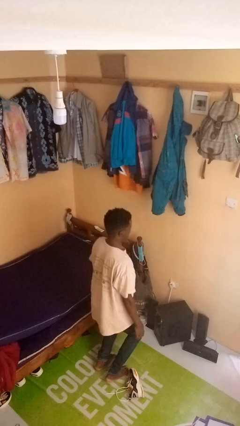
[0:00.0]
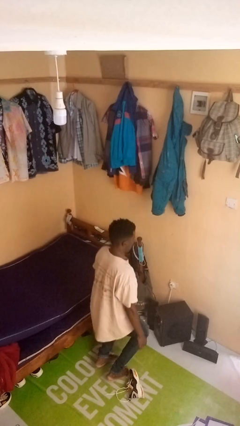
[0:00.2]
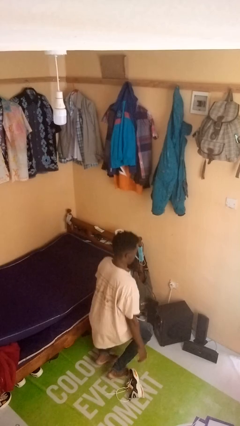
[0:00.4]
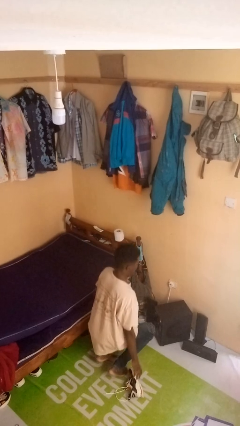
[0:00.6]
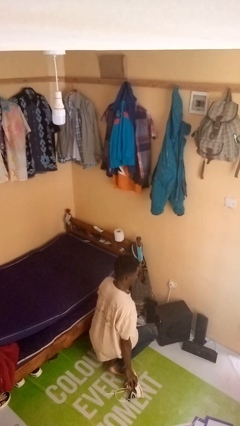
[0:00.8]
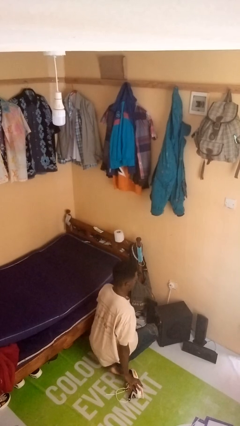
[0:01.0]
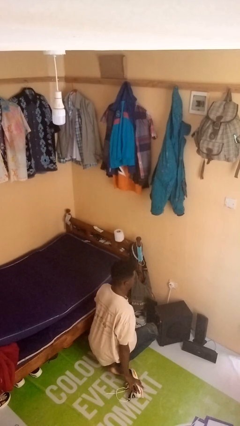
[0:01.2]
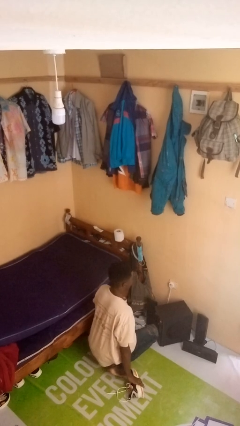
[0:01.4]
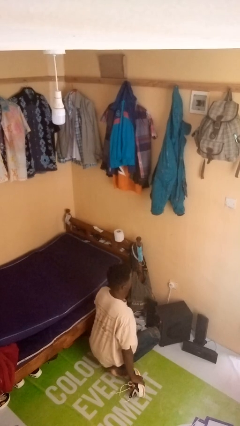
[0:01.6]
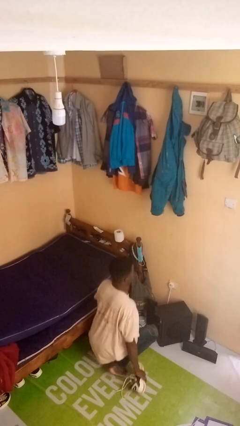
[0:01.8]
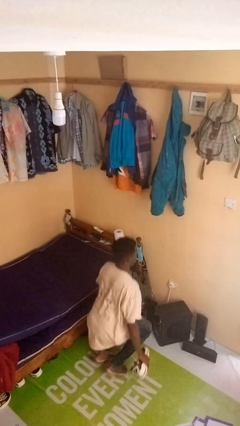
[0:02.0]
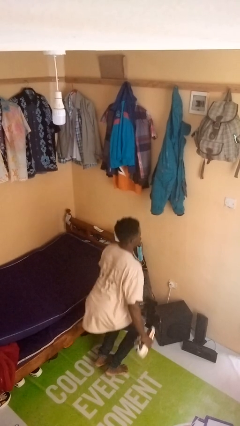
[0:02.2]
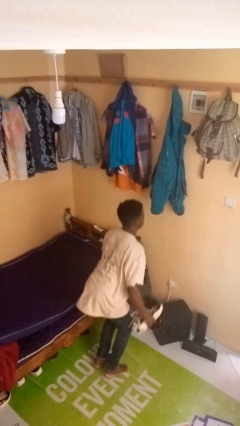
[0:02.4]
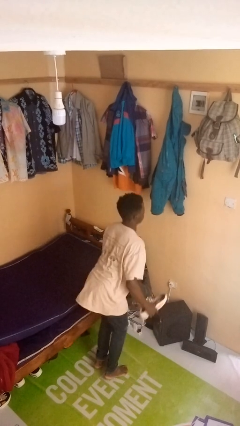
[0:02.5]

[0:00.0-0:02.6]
person picks up object from floor

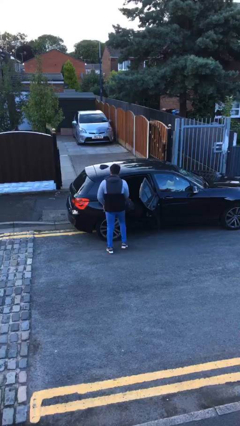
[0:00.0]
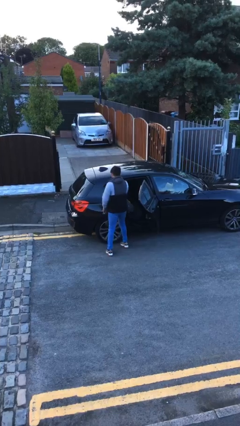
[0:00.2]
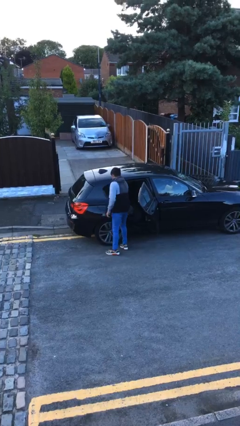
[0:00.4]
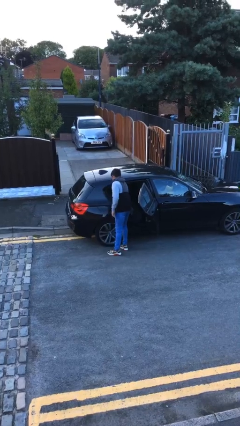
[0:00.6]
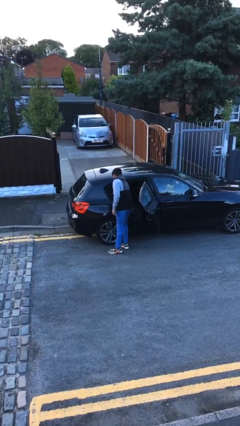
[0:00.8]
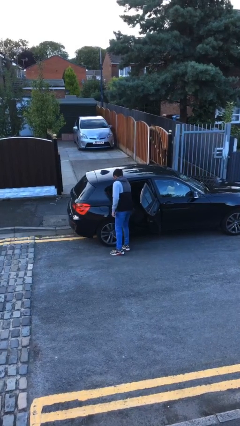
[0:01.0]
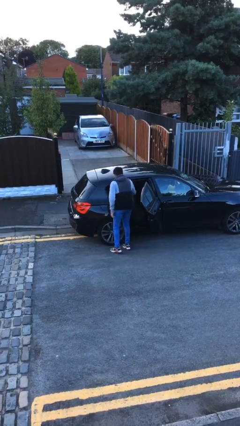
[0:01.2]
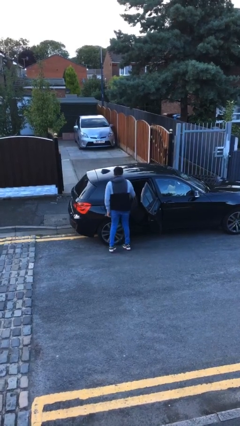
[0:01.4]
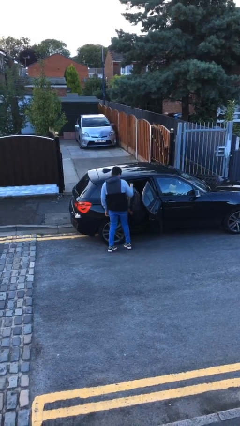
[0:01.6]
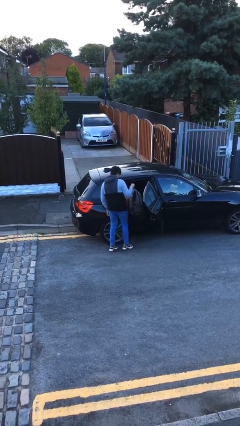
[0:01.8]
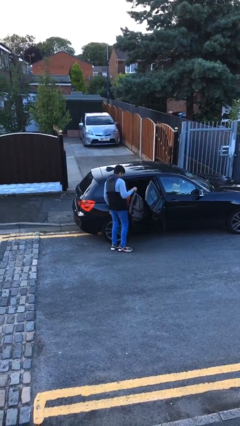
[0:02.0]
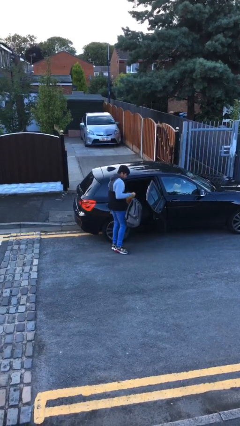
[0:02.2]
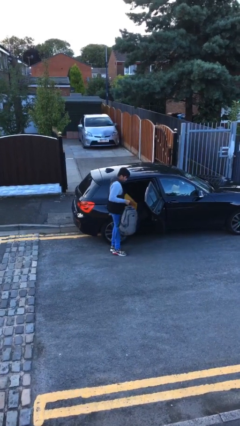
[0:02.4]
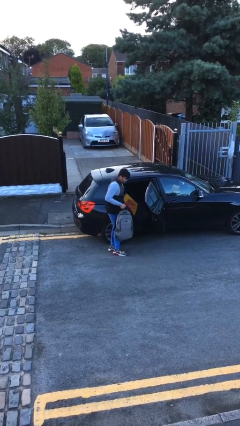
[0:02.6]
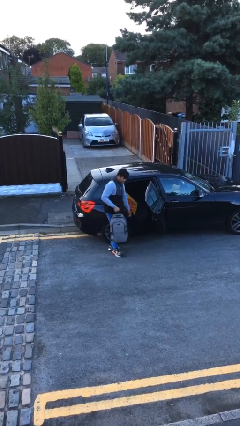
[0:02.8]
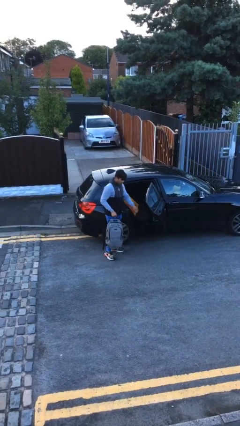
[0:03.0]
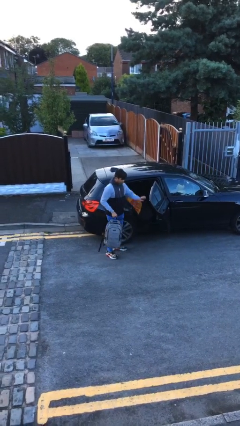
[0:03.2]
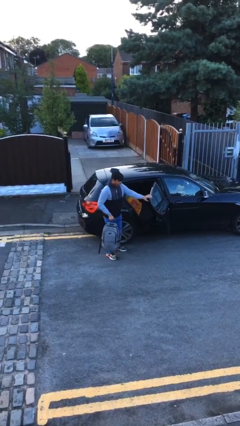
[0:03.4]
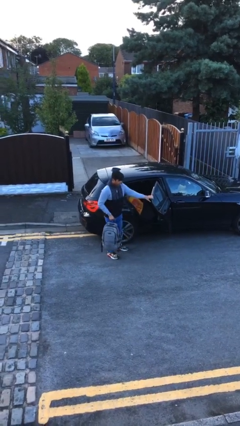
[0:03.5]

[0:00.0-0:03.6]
person unloads car

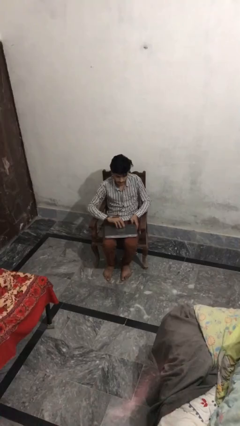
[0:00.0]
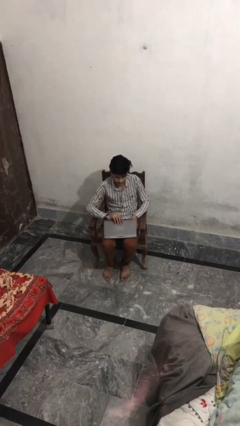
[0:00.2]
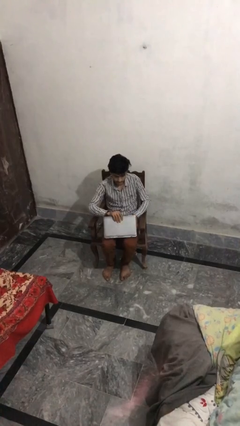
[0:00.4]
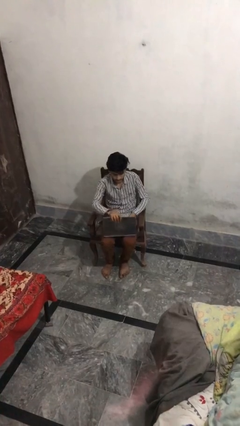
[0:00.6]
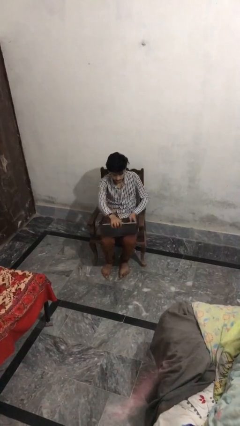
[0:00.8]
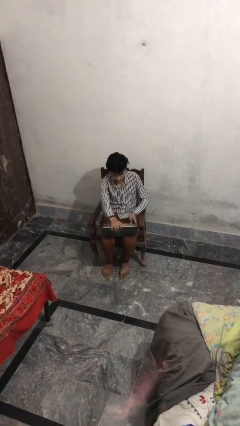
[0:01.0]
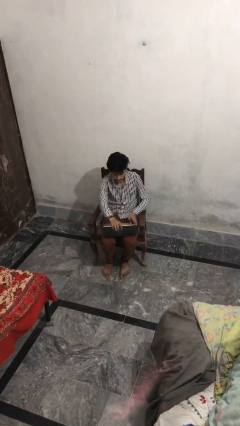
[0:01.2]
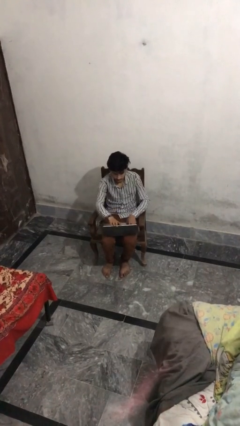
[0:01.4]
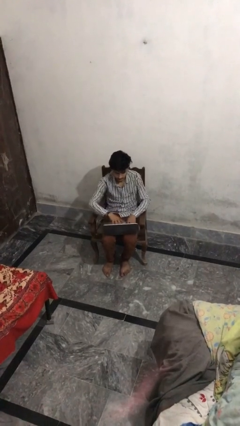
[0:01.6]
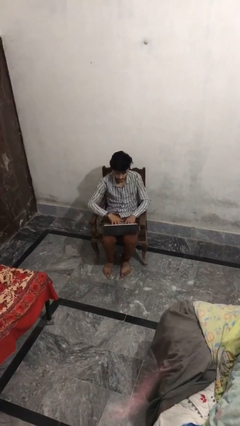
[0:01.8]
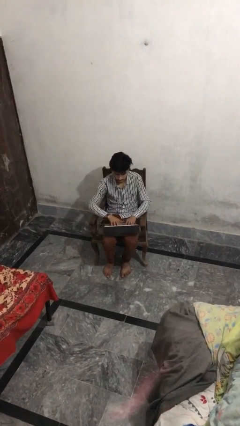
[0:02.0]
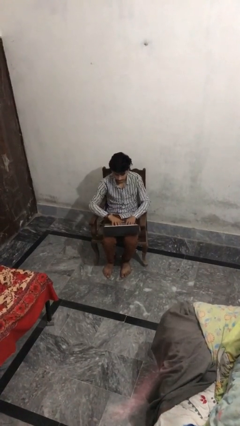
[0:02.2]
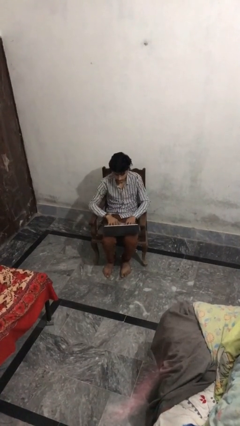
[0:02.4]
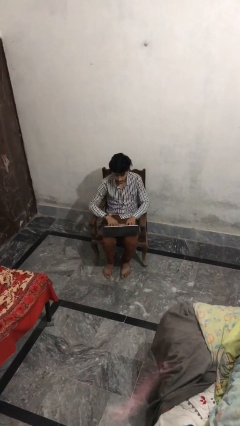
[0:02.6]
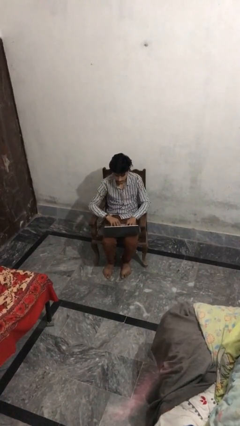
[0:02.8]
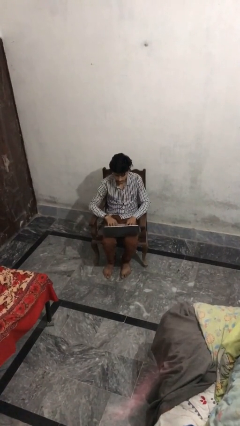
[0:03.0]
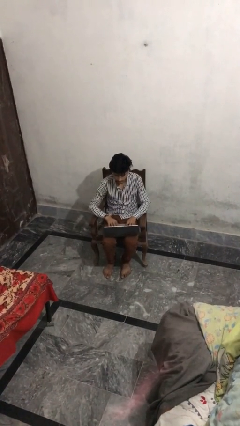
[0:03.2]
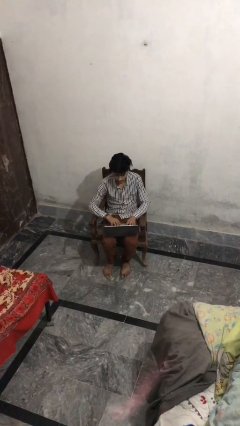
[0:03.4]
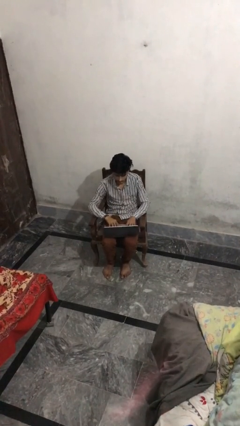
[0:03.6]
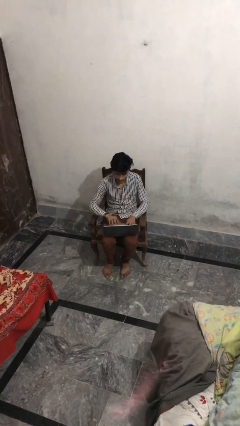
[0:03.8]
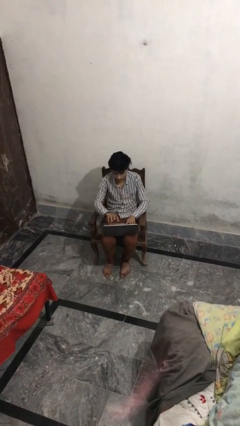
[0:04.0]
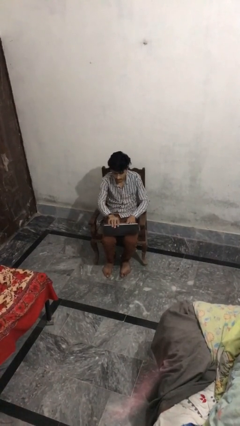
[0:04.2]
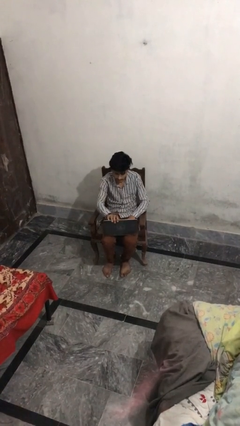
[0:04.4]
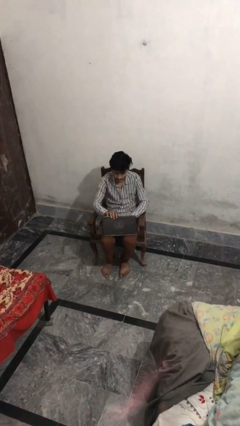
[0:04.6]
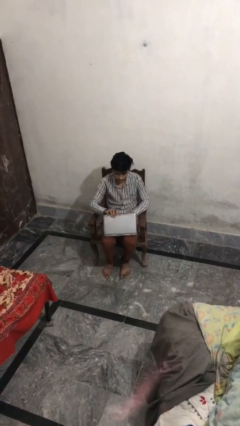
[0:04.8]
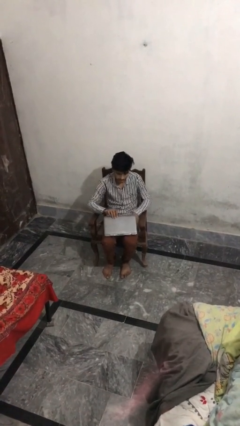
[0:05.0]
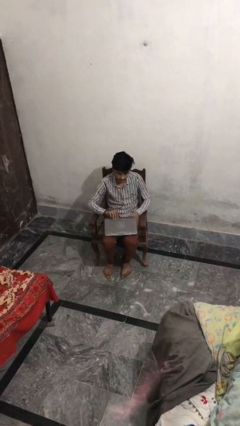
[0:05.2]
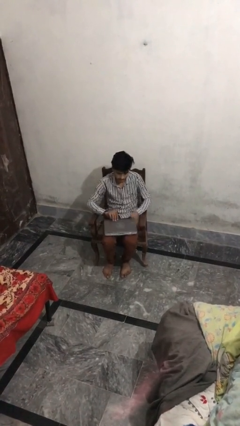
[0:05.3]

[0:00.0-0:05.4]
person interacts with laptop

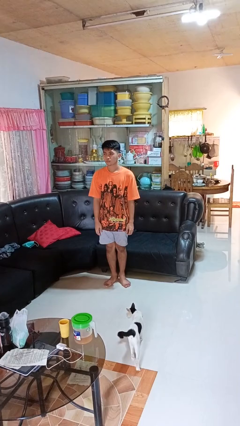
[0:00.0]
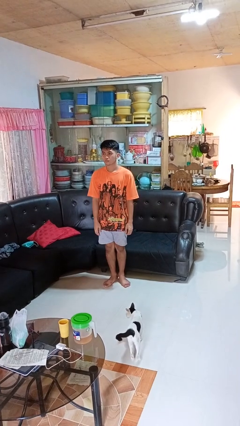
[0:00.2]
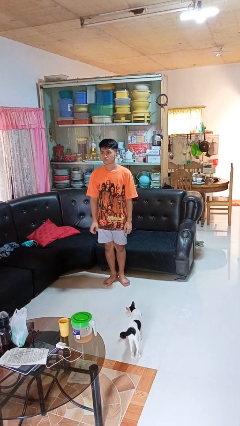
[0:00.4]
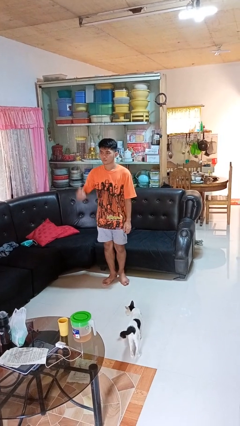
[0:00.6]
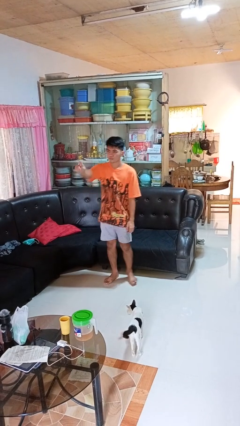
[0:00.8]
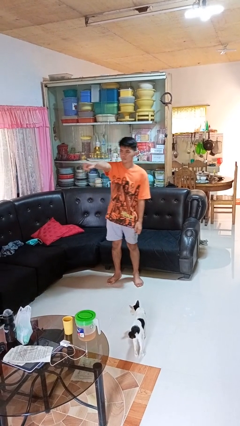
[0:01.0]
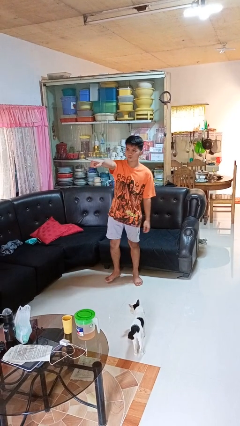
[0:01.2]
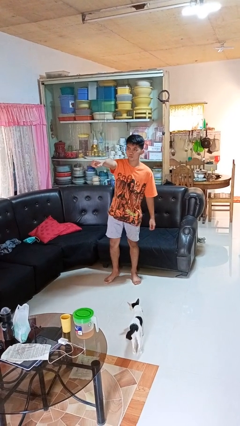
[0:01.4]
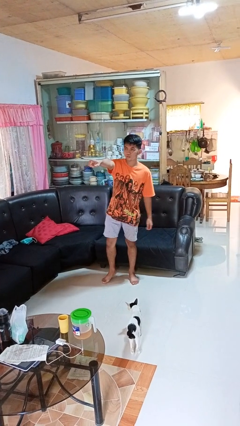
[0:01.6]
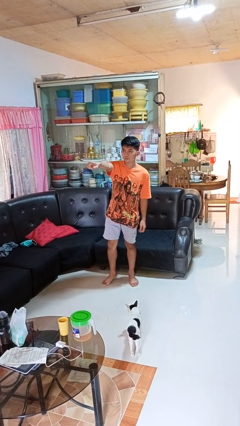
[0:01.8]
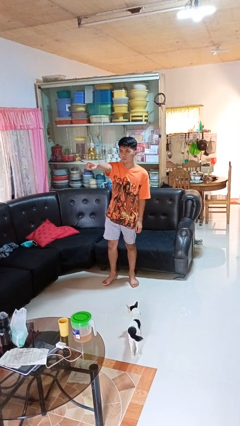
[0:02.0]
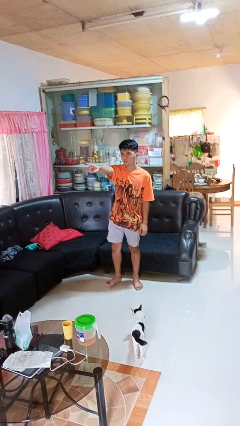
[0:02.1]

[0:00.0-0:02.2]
person points at person

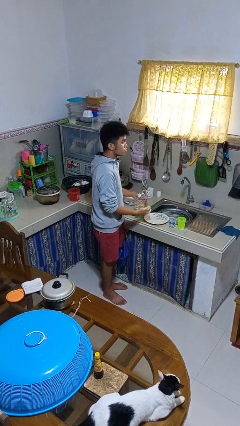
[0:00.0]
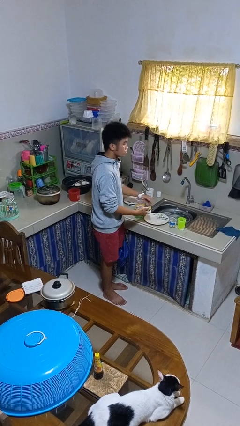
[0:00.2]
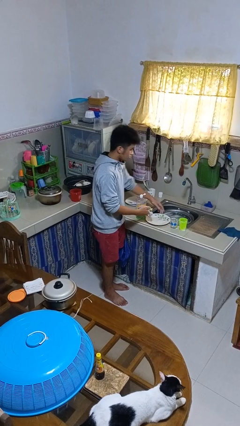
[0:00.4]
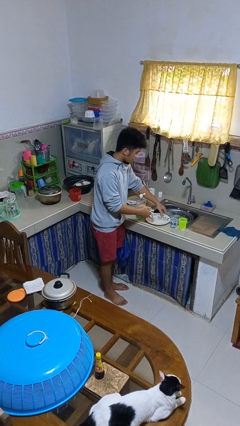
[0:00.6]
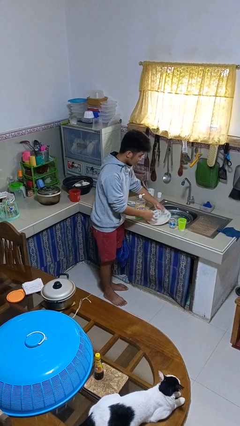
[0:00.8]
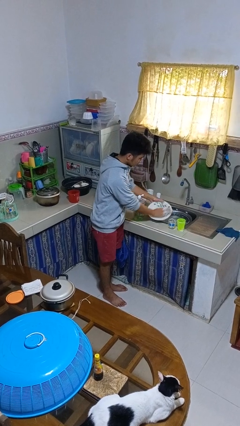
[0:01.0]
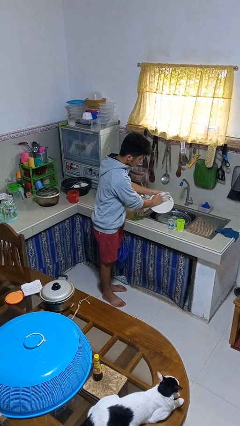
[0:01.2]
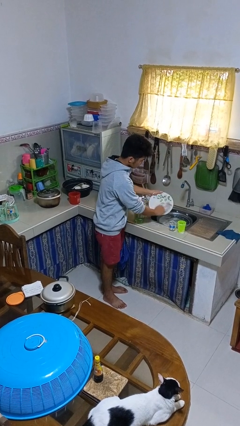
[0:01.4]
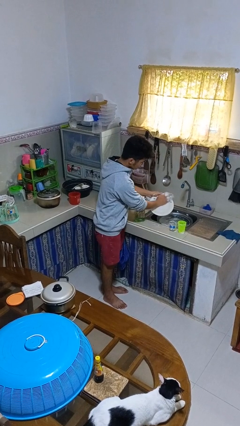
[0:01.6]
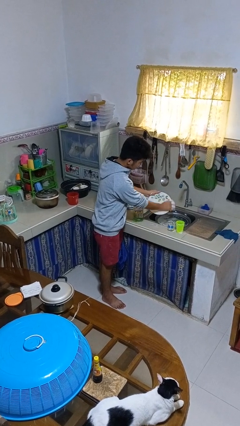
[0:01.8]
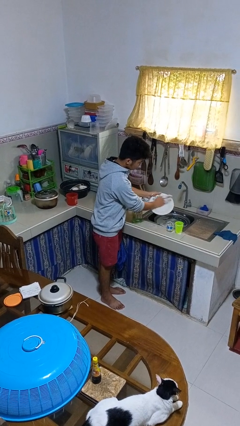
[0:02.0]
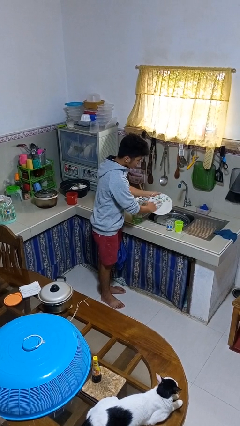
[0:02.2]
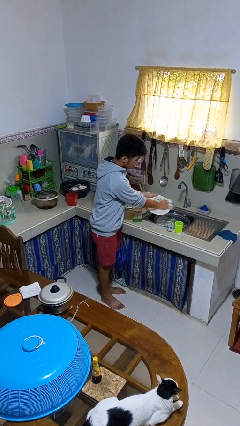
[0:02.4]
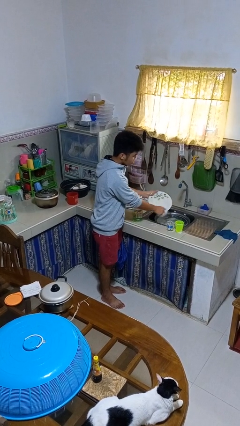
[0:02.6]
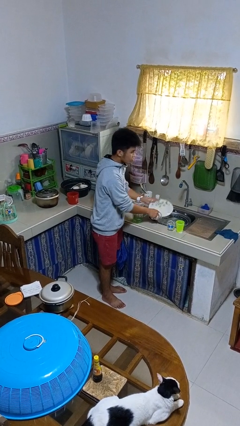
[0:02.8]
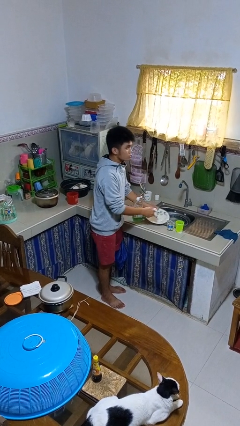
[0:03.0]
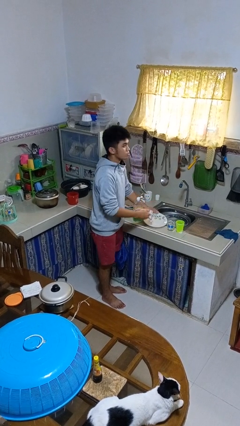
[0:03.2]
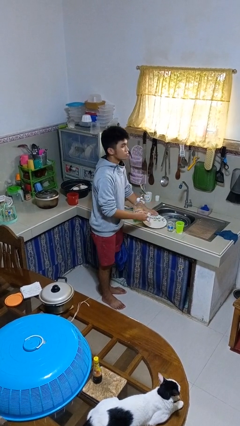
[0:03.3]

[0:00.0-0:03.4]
person washes dish

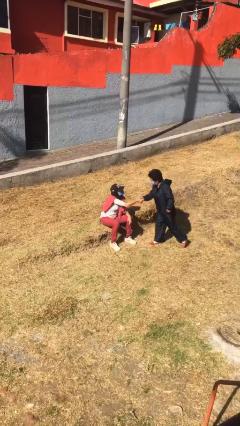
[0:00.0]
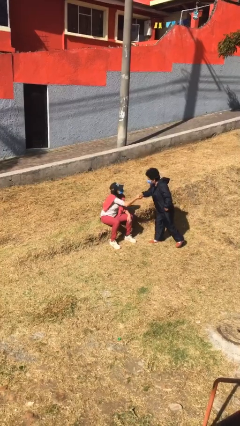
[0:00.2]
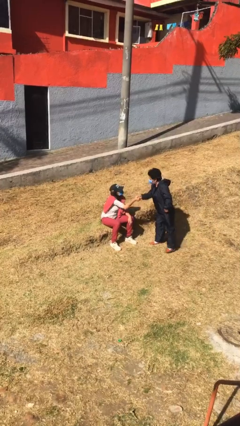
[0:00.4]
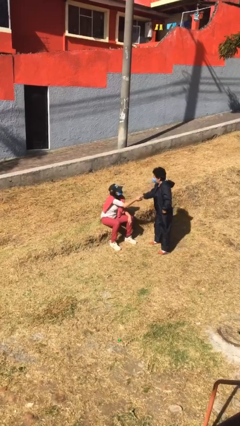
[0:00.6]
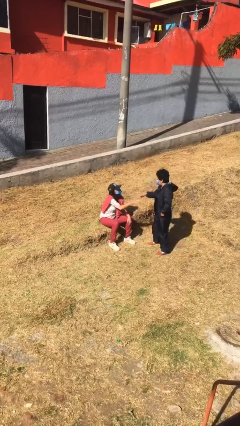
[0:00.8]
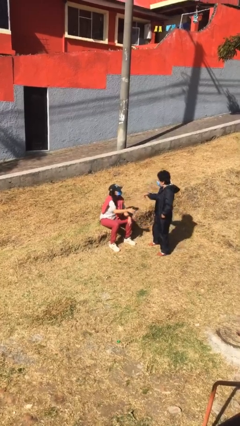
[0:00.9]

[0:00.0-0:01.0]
person shakes hand
